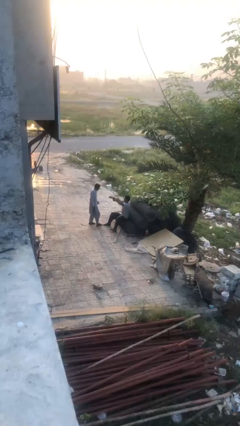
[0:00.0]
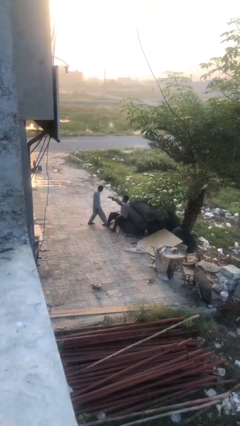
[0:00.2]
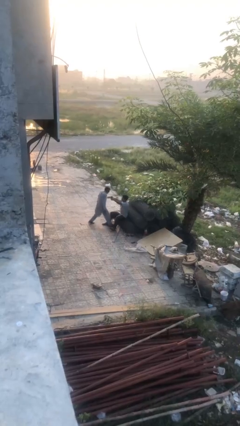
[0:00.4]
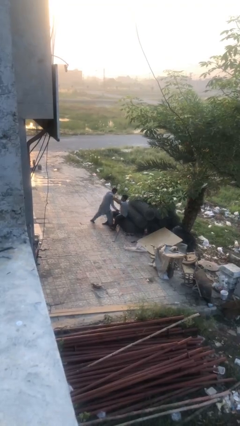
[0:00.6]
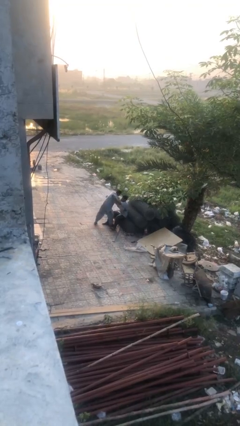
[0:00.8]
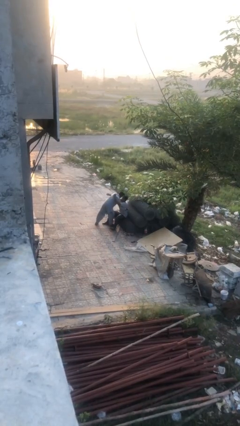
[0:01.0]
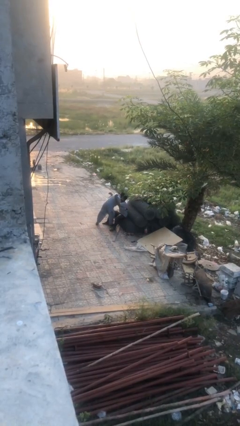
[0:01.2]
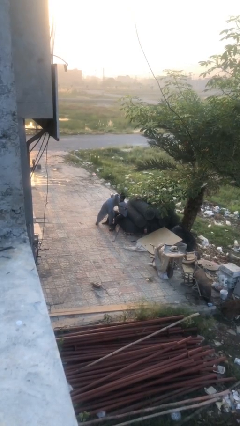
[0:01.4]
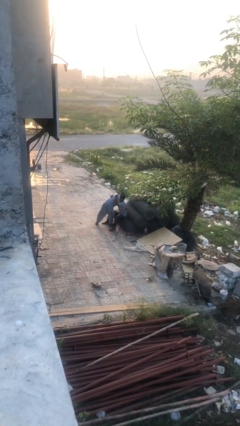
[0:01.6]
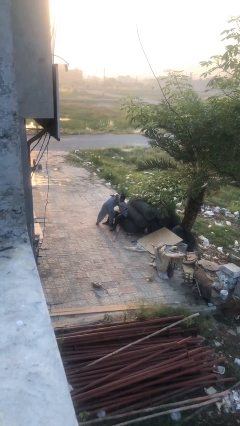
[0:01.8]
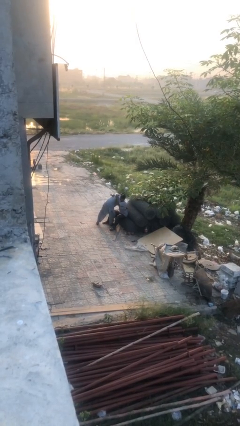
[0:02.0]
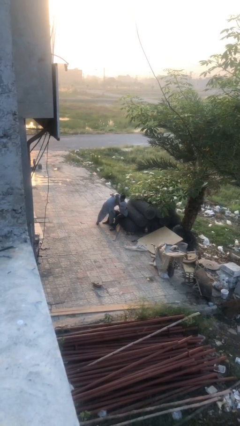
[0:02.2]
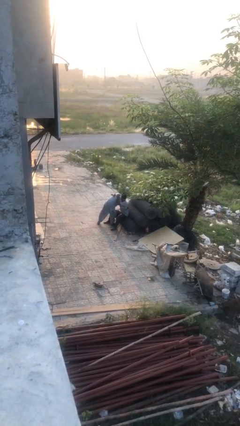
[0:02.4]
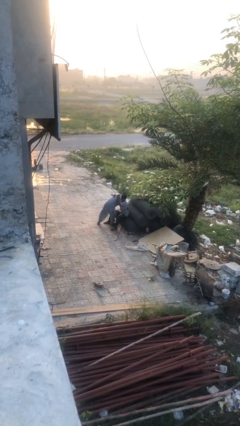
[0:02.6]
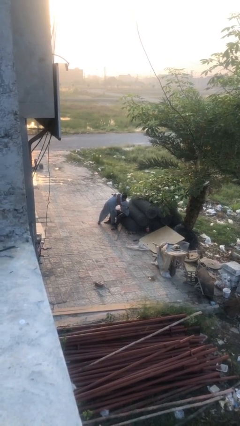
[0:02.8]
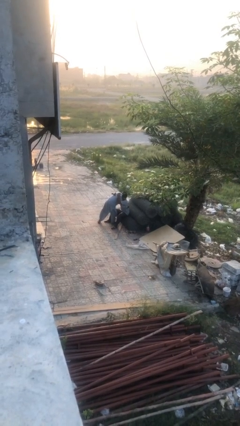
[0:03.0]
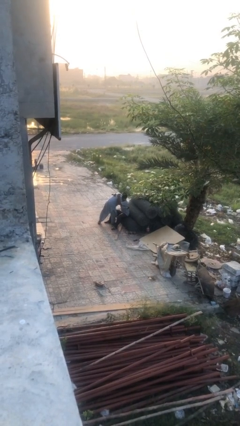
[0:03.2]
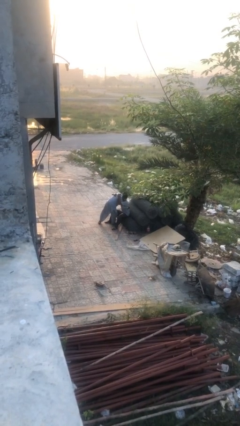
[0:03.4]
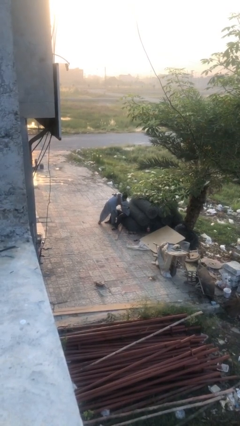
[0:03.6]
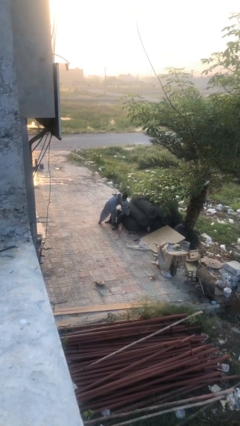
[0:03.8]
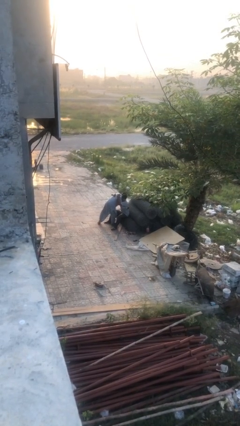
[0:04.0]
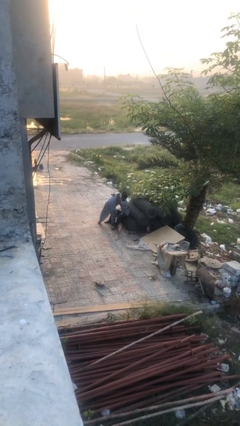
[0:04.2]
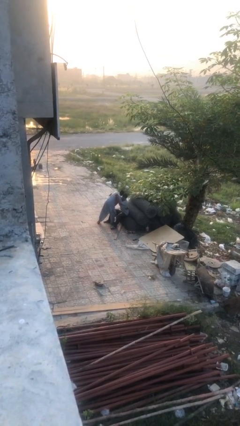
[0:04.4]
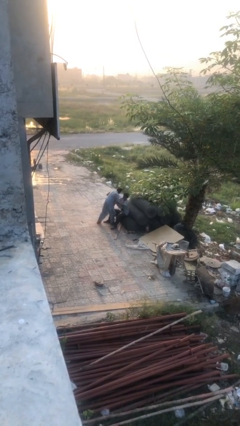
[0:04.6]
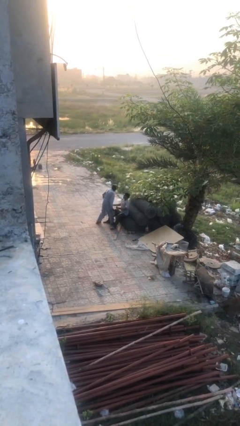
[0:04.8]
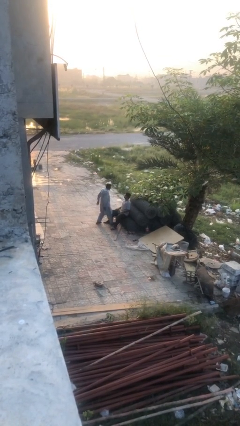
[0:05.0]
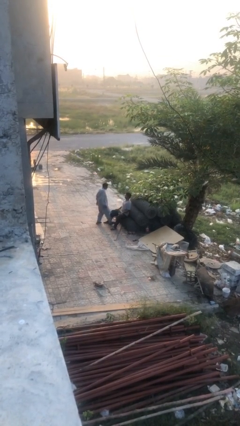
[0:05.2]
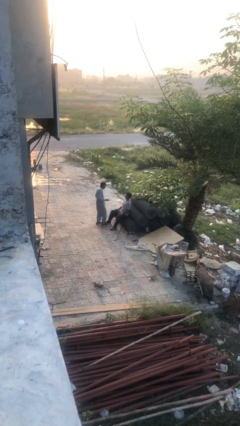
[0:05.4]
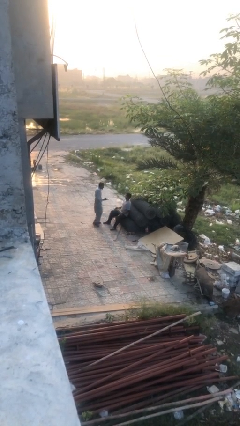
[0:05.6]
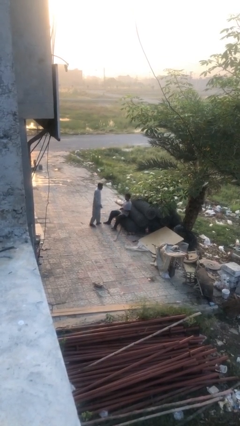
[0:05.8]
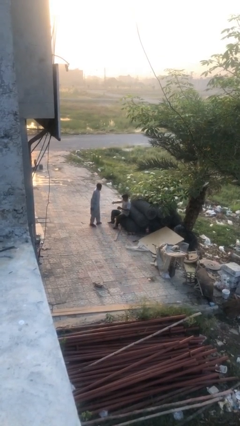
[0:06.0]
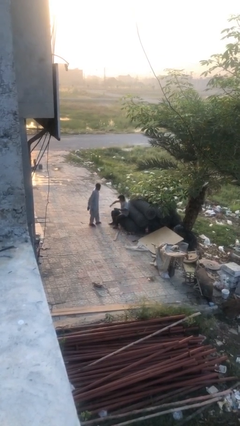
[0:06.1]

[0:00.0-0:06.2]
person embraces person

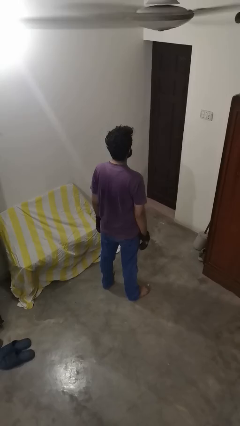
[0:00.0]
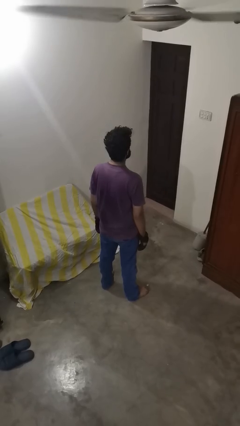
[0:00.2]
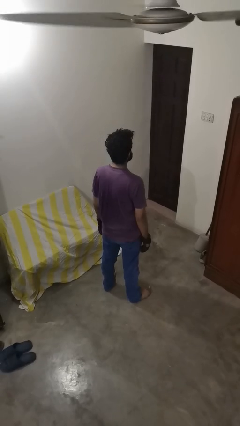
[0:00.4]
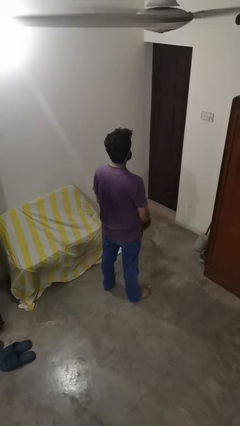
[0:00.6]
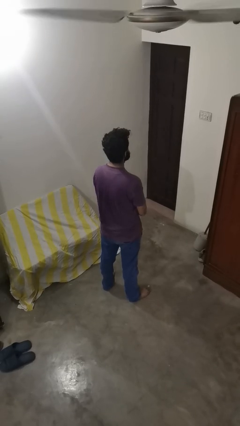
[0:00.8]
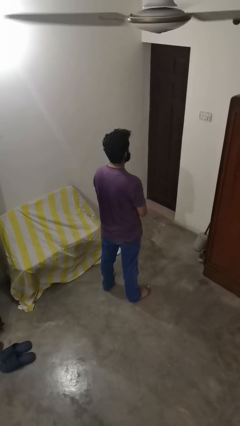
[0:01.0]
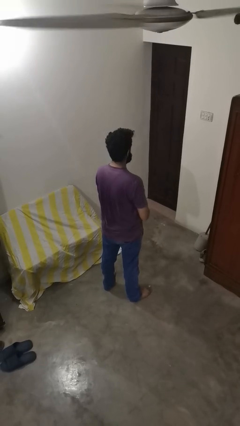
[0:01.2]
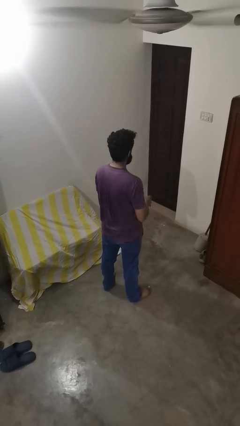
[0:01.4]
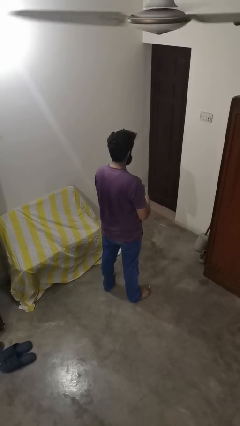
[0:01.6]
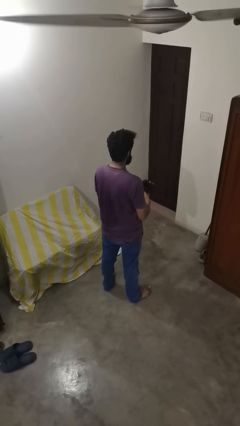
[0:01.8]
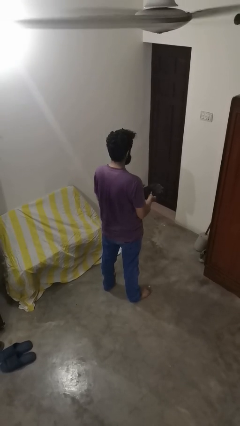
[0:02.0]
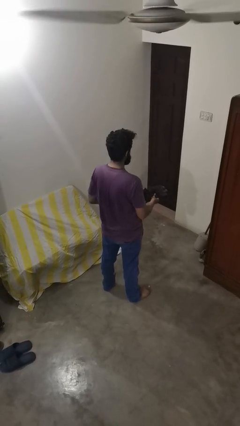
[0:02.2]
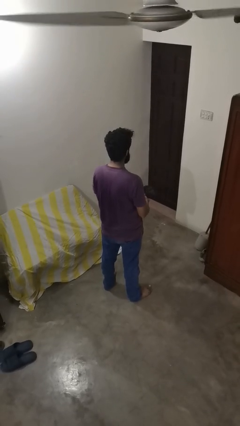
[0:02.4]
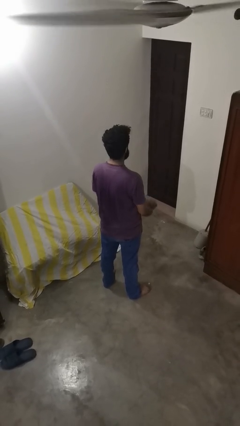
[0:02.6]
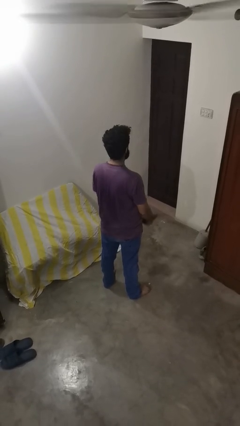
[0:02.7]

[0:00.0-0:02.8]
person takes off gloves

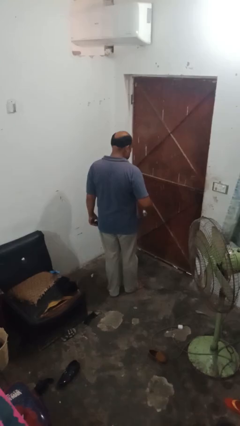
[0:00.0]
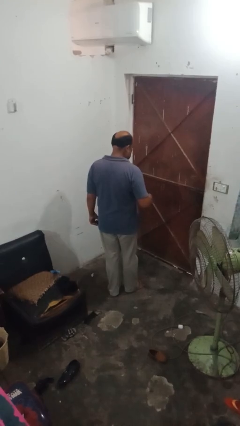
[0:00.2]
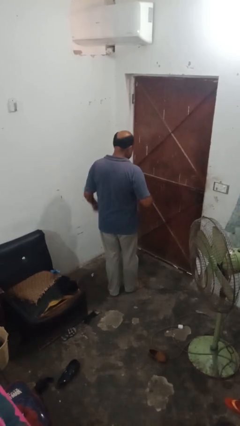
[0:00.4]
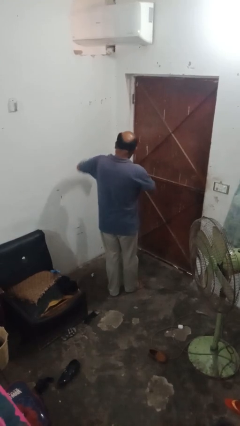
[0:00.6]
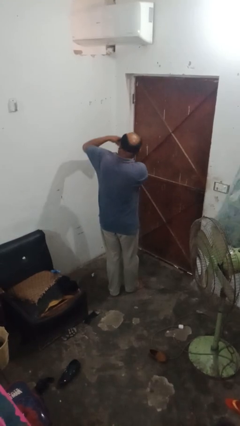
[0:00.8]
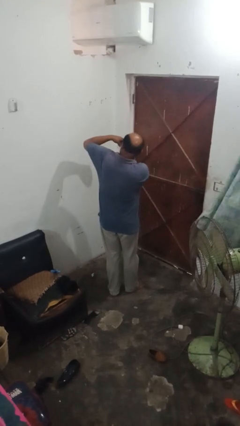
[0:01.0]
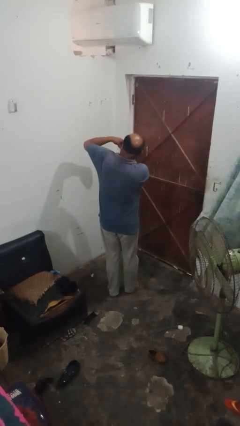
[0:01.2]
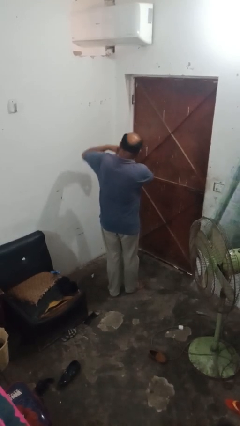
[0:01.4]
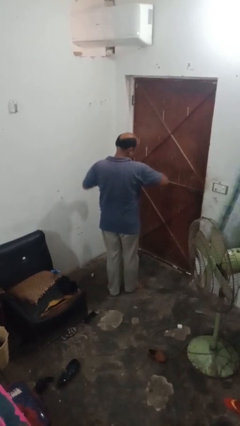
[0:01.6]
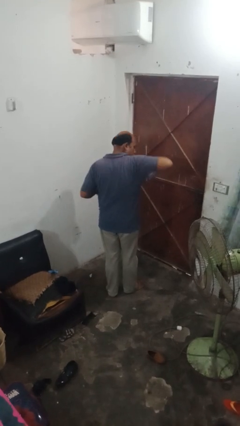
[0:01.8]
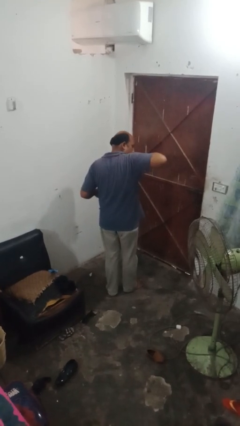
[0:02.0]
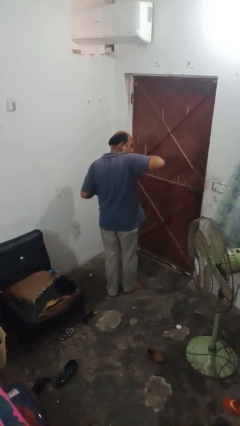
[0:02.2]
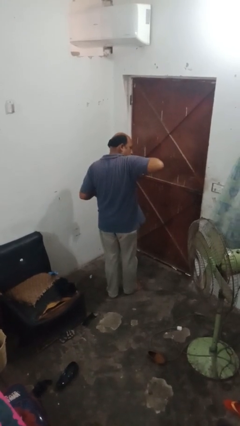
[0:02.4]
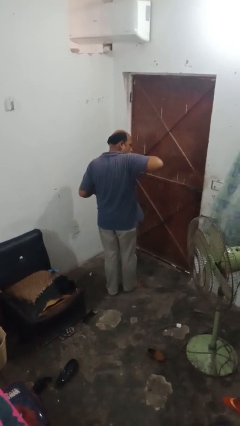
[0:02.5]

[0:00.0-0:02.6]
person applies deodorant

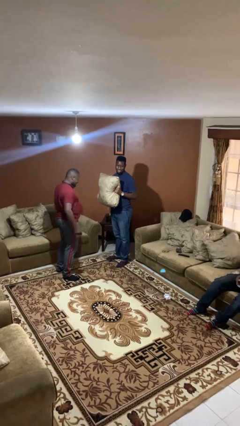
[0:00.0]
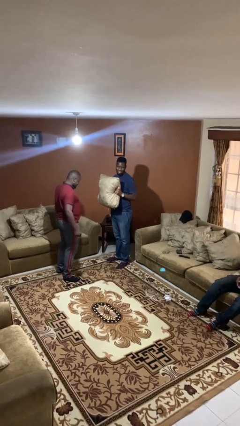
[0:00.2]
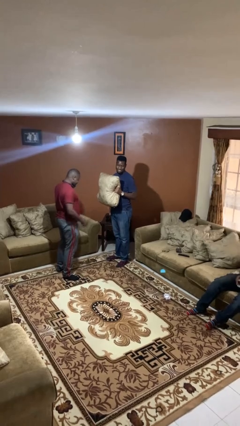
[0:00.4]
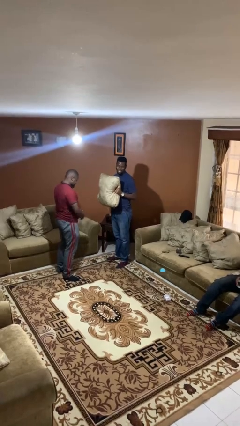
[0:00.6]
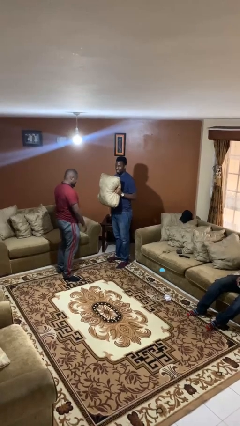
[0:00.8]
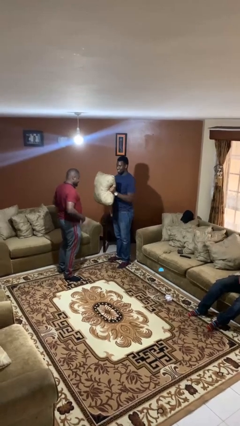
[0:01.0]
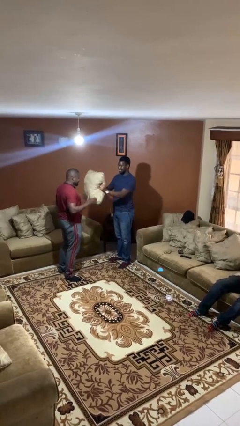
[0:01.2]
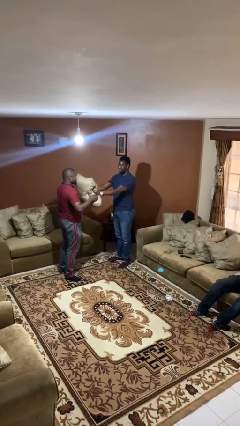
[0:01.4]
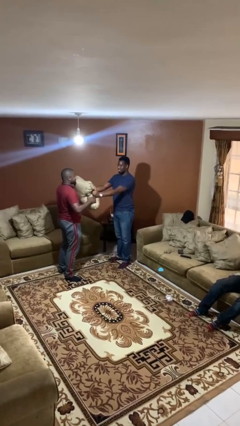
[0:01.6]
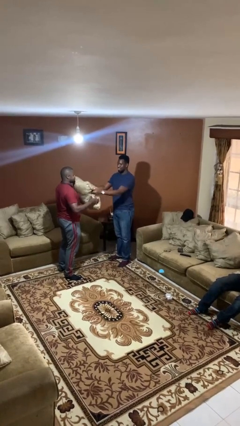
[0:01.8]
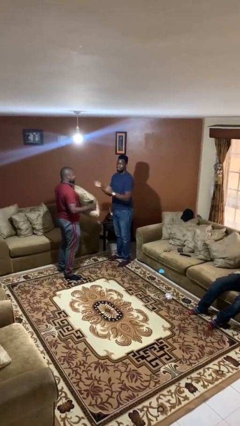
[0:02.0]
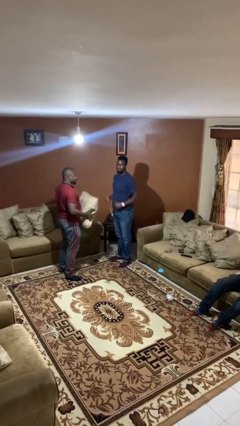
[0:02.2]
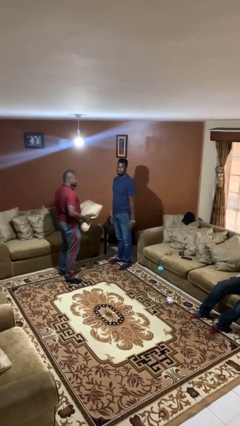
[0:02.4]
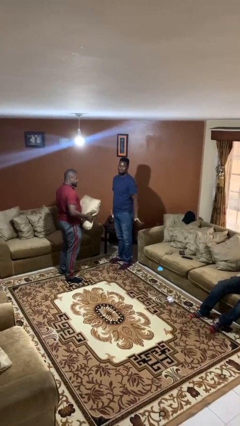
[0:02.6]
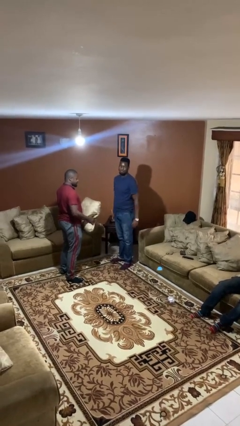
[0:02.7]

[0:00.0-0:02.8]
person transfers object to person

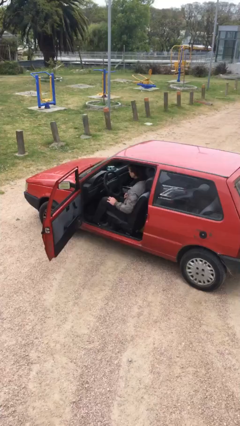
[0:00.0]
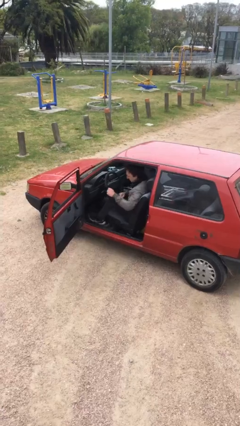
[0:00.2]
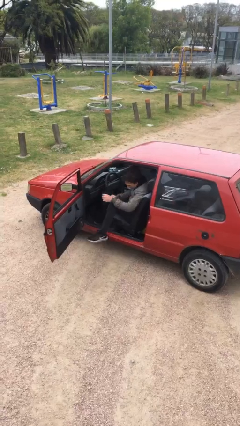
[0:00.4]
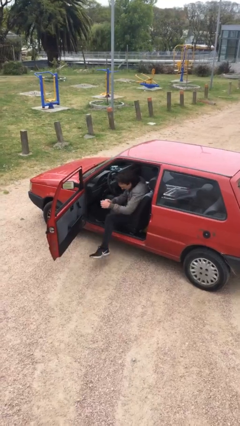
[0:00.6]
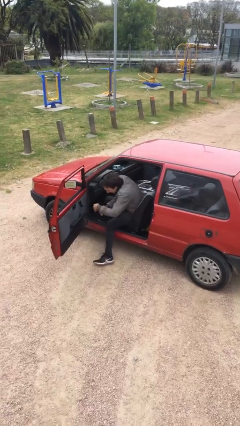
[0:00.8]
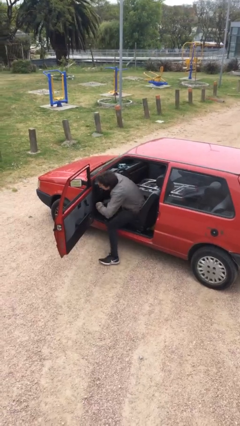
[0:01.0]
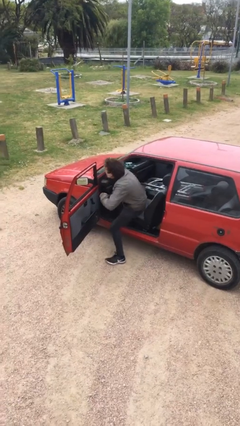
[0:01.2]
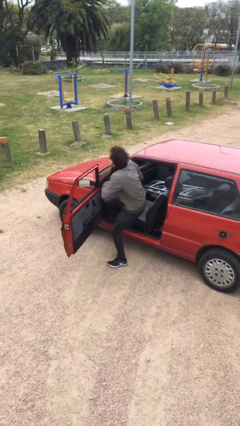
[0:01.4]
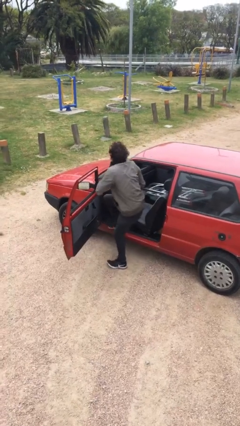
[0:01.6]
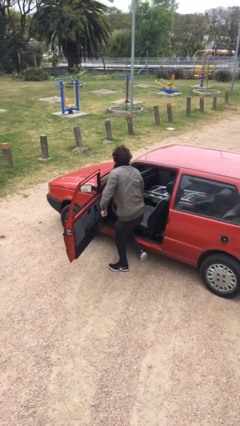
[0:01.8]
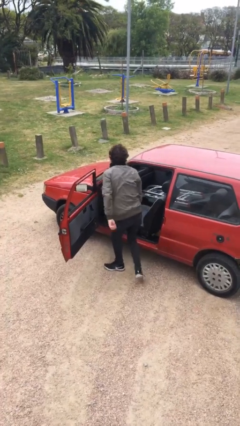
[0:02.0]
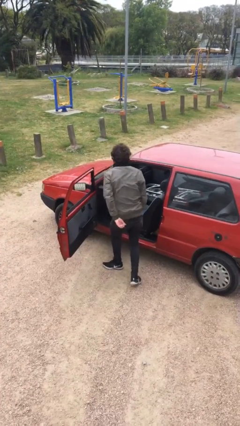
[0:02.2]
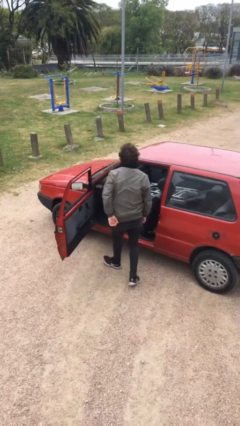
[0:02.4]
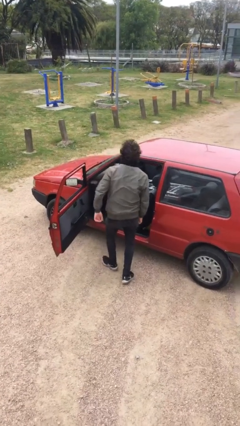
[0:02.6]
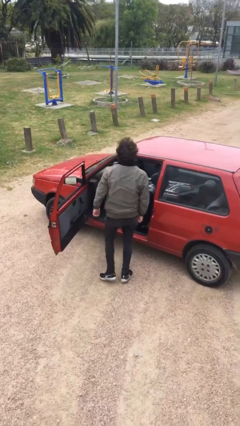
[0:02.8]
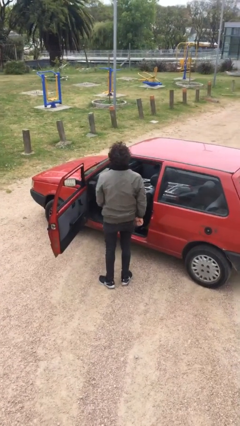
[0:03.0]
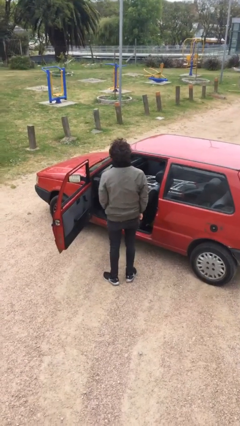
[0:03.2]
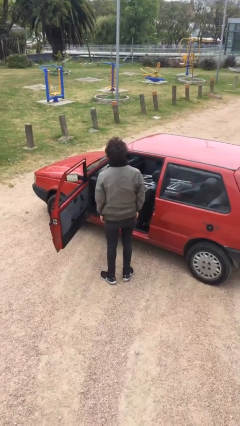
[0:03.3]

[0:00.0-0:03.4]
person exits car
